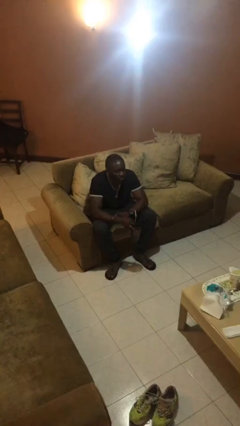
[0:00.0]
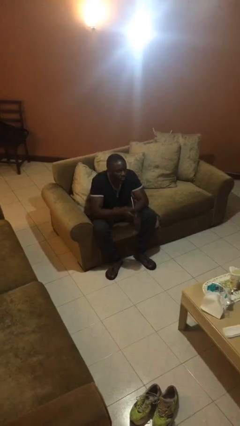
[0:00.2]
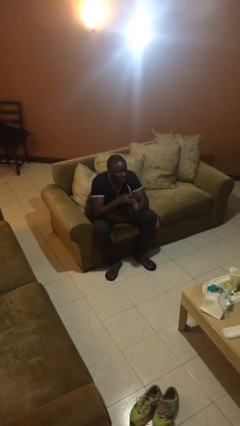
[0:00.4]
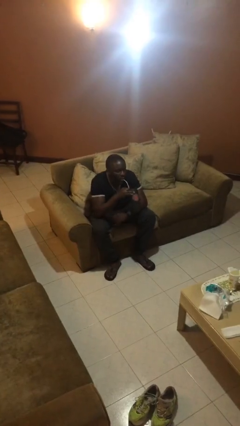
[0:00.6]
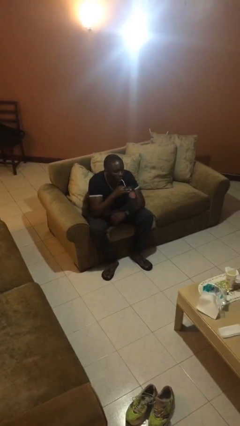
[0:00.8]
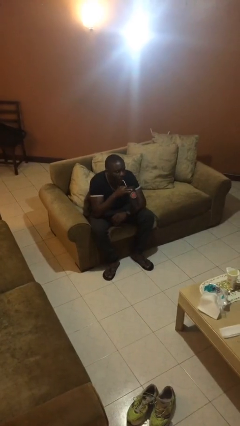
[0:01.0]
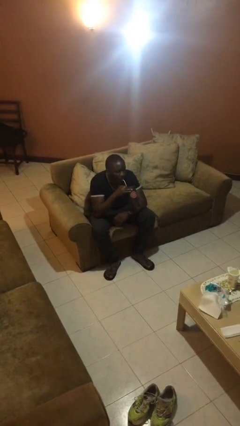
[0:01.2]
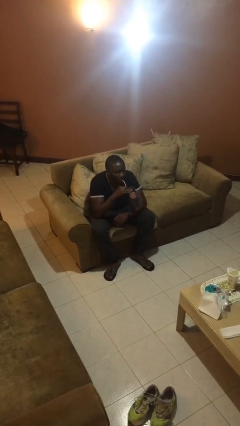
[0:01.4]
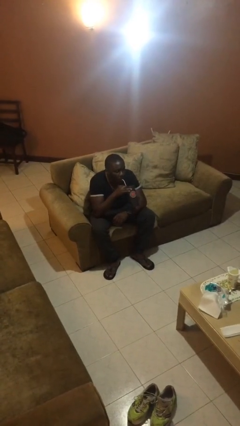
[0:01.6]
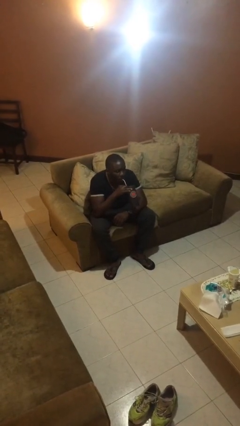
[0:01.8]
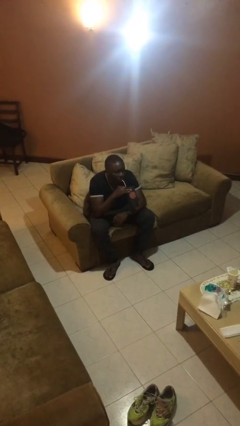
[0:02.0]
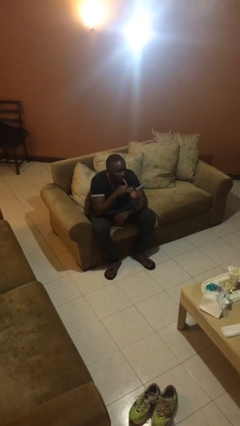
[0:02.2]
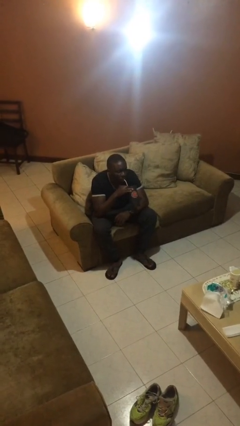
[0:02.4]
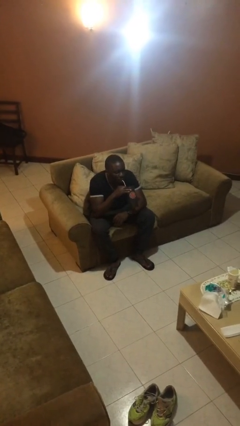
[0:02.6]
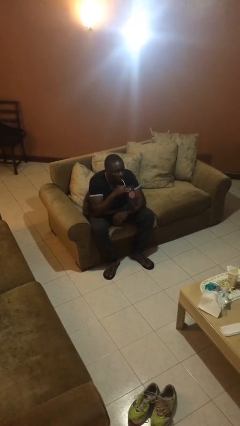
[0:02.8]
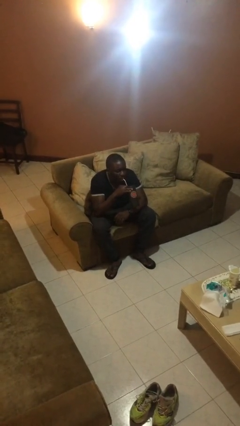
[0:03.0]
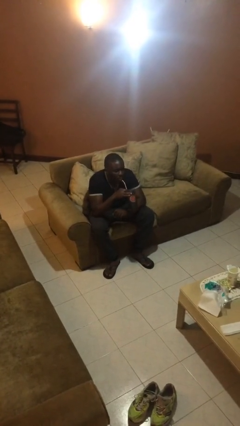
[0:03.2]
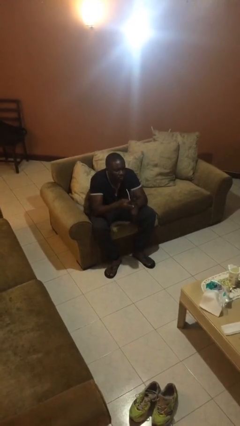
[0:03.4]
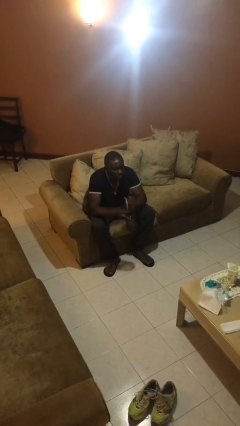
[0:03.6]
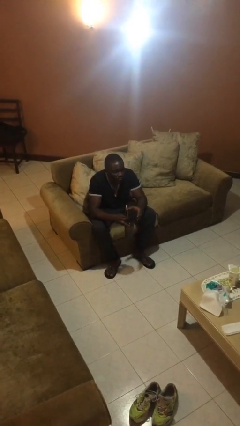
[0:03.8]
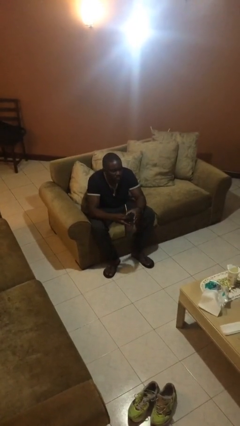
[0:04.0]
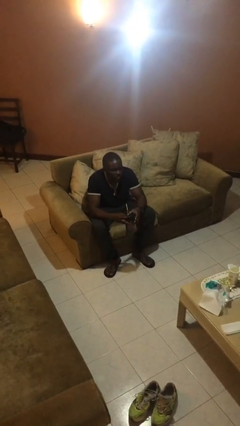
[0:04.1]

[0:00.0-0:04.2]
person drinks from straw

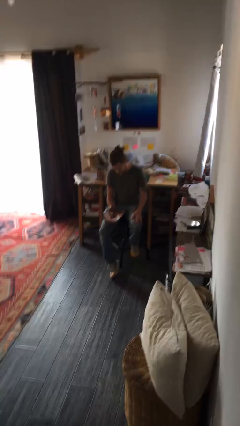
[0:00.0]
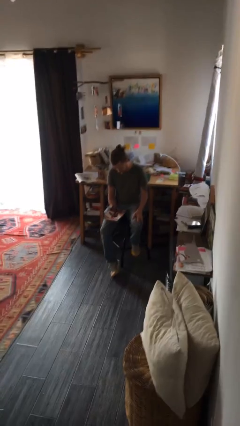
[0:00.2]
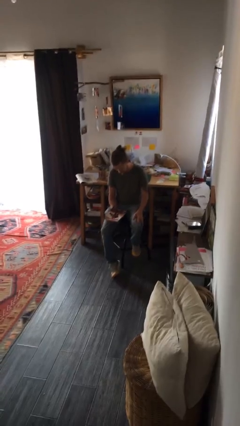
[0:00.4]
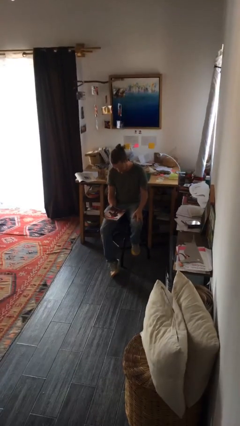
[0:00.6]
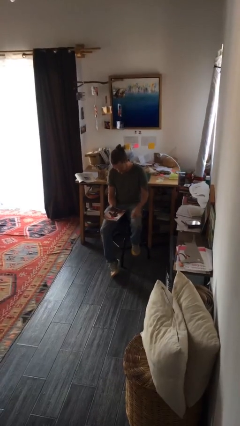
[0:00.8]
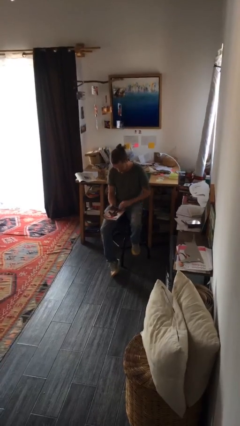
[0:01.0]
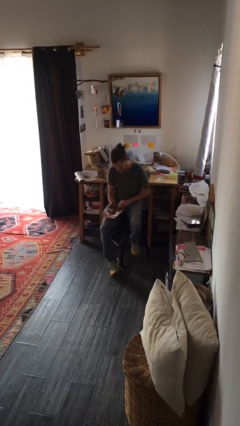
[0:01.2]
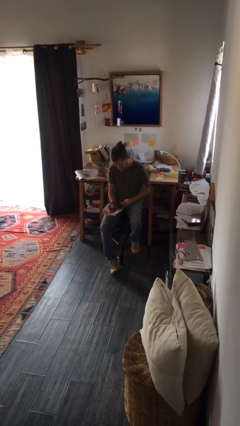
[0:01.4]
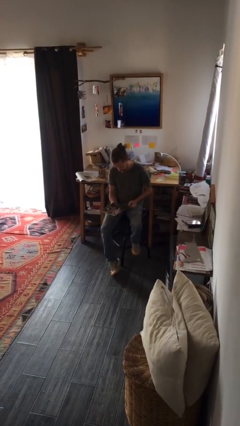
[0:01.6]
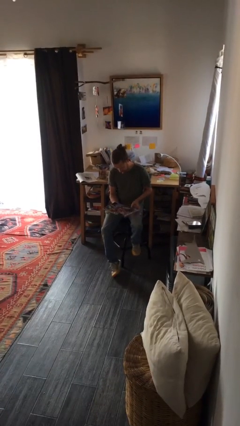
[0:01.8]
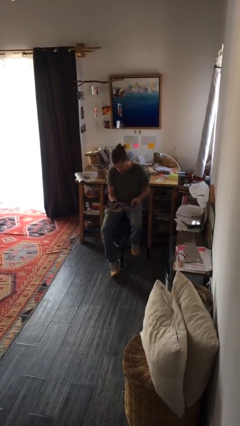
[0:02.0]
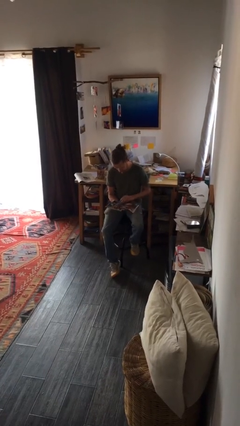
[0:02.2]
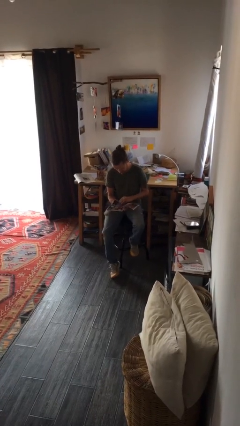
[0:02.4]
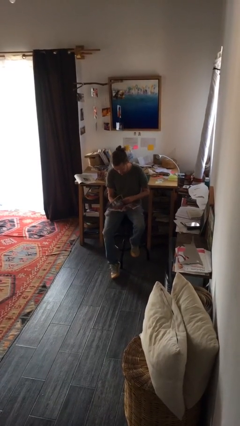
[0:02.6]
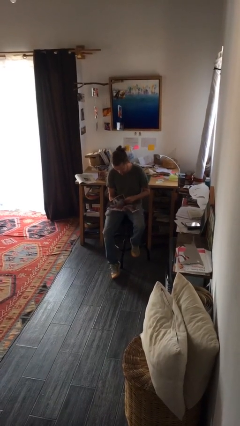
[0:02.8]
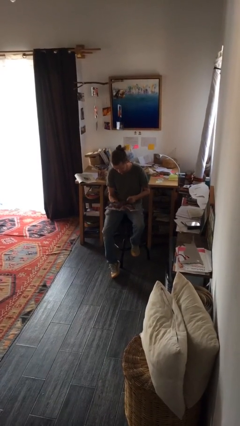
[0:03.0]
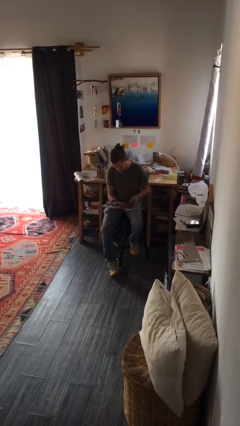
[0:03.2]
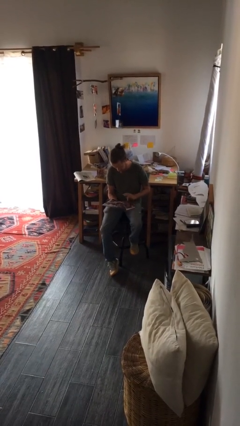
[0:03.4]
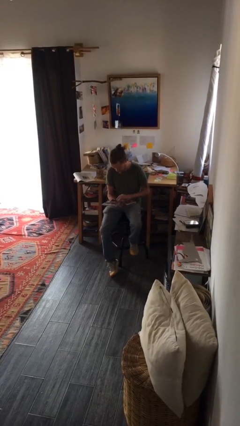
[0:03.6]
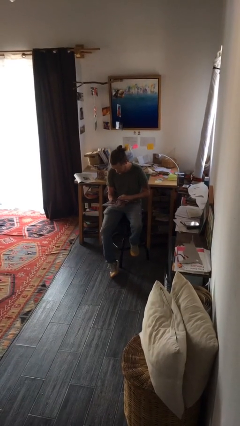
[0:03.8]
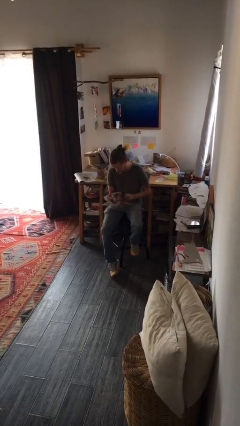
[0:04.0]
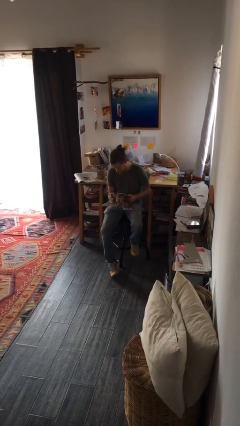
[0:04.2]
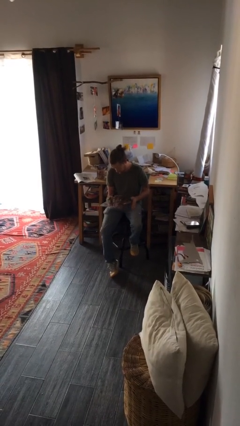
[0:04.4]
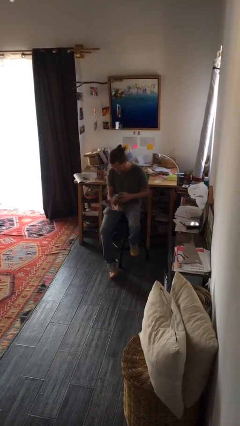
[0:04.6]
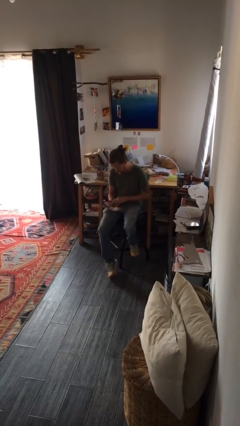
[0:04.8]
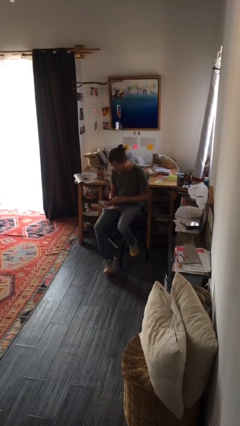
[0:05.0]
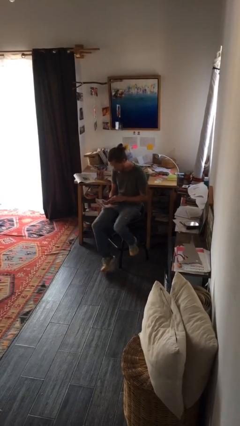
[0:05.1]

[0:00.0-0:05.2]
person reads magazine

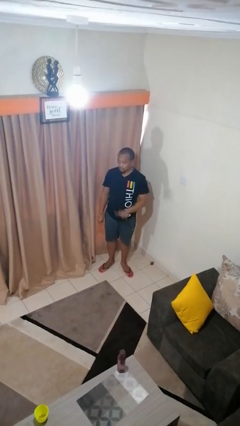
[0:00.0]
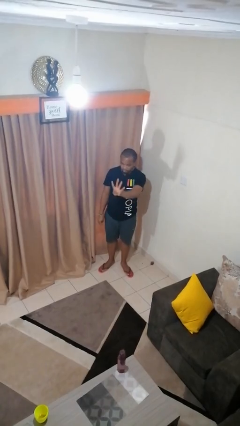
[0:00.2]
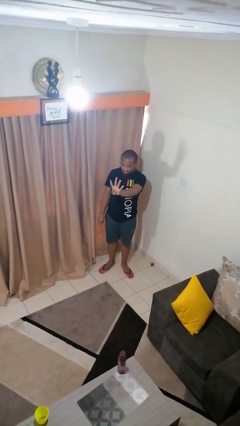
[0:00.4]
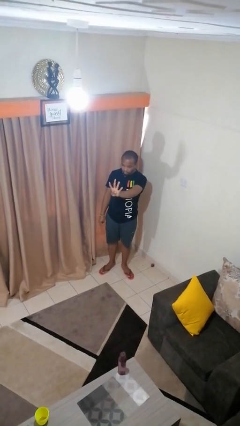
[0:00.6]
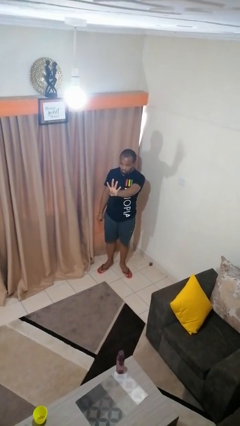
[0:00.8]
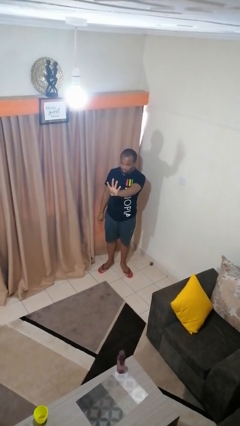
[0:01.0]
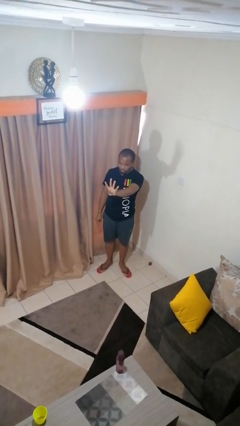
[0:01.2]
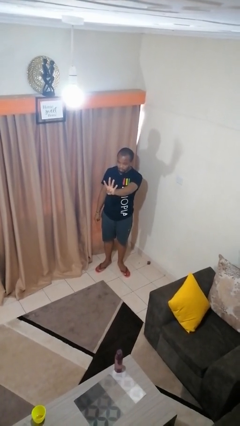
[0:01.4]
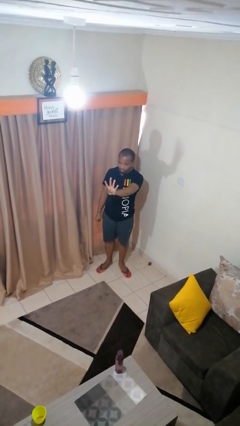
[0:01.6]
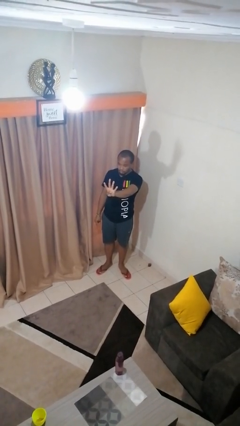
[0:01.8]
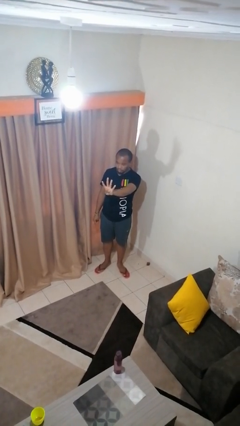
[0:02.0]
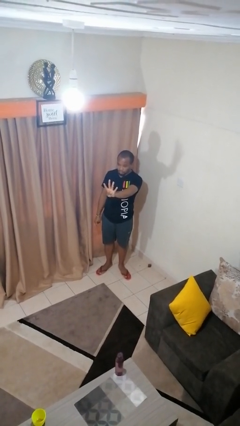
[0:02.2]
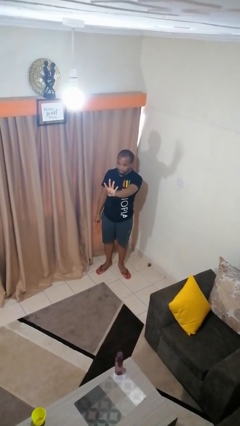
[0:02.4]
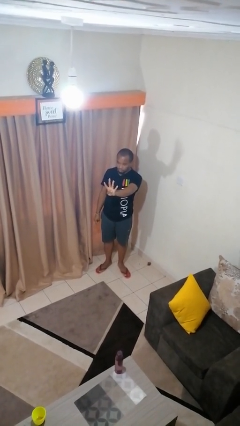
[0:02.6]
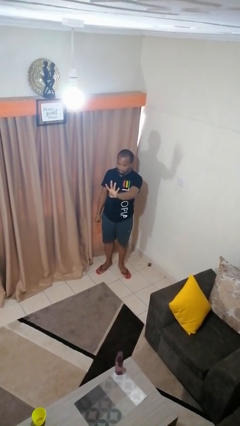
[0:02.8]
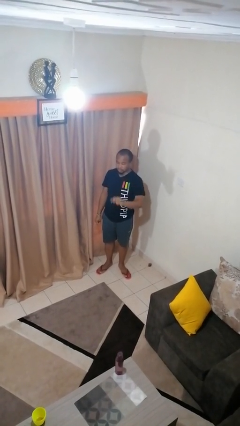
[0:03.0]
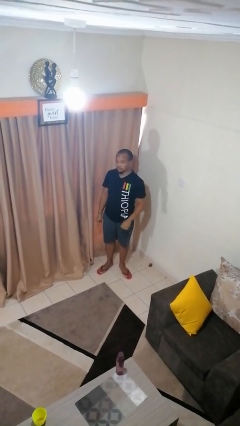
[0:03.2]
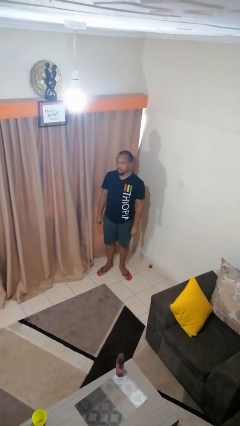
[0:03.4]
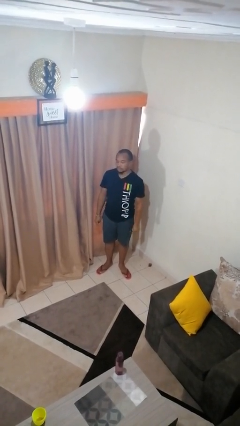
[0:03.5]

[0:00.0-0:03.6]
person gestures number four

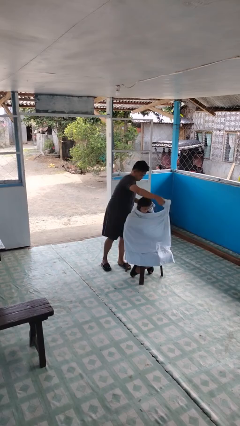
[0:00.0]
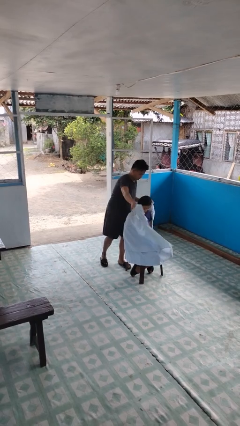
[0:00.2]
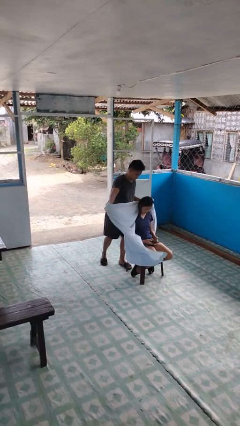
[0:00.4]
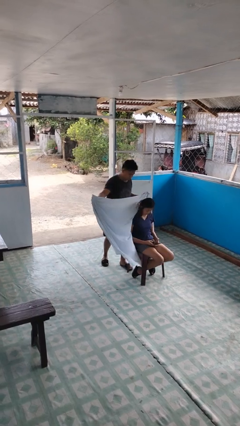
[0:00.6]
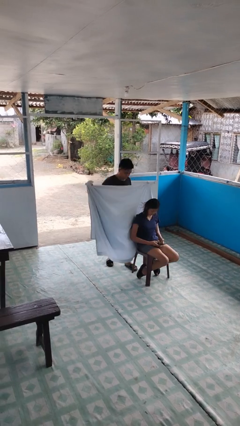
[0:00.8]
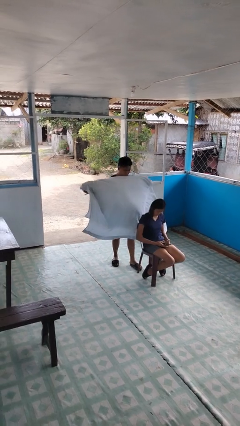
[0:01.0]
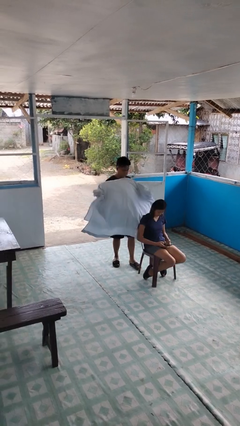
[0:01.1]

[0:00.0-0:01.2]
person uncovers friend with blanket

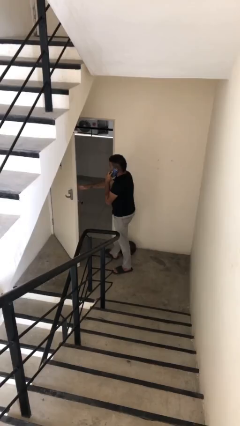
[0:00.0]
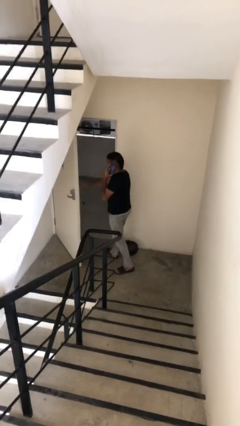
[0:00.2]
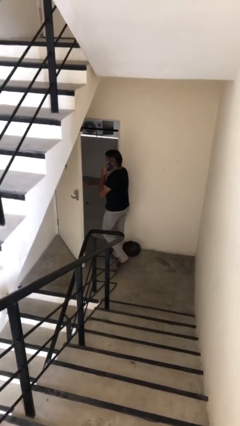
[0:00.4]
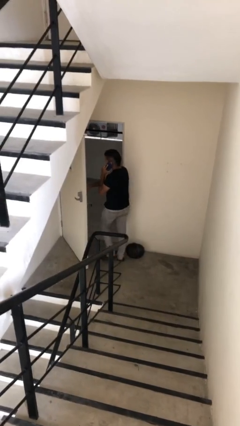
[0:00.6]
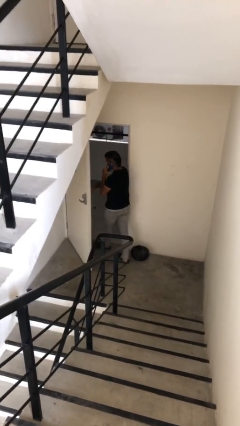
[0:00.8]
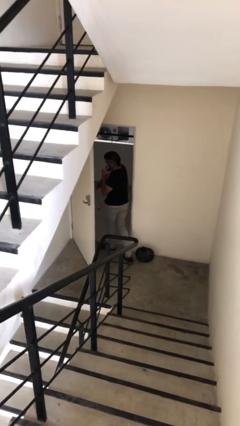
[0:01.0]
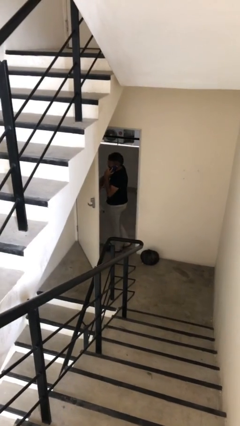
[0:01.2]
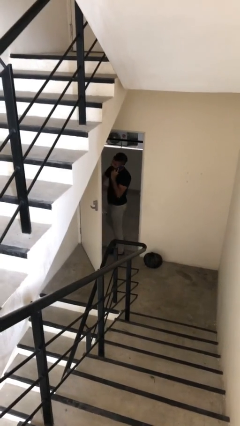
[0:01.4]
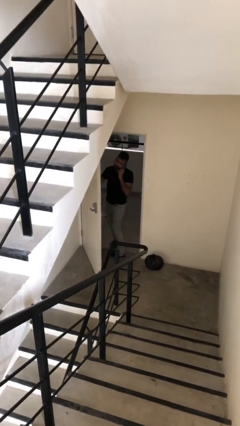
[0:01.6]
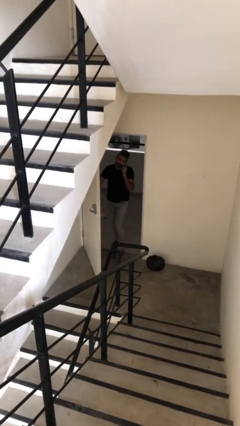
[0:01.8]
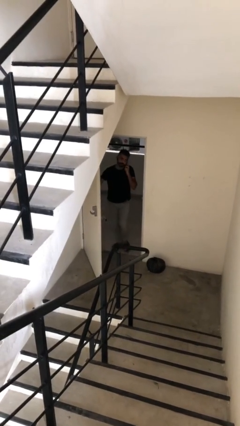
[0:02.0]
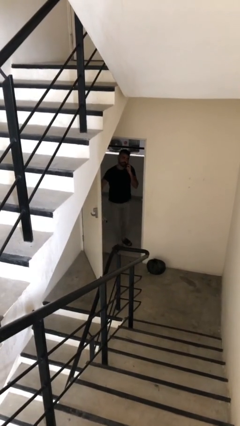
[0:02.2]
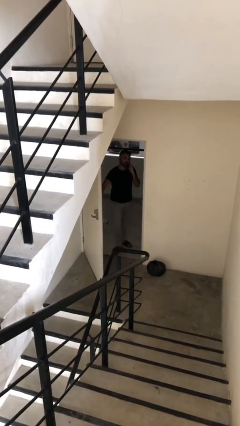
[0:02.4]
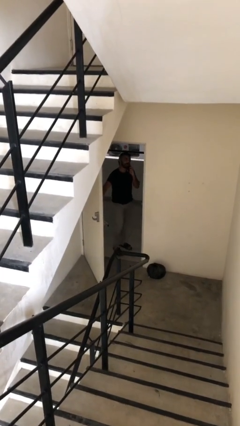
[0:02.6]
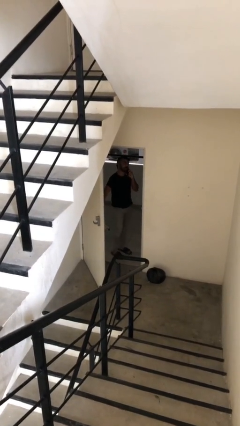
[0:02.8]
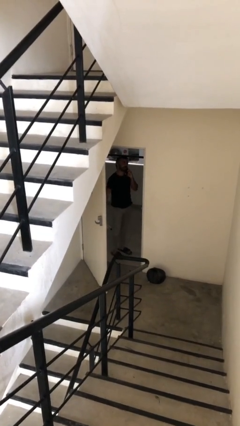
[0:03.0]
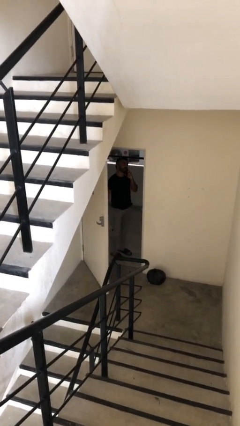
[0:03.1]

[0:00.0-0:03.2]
person exits scene through structure

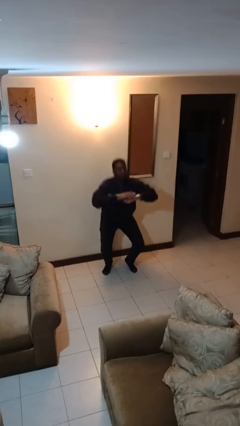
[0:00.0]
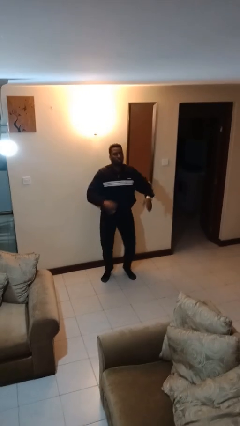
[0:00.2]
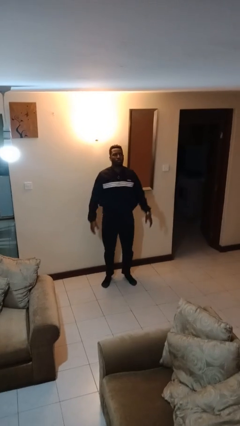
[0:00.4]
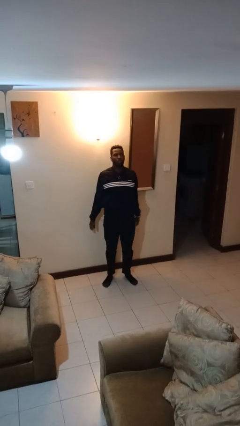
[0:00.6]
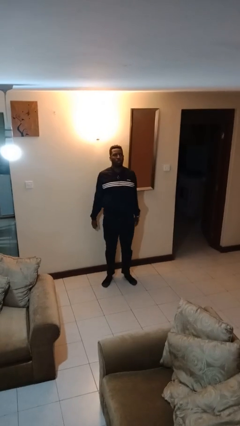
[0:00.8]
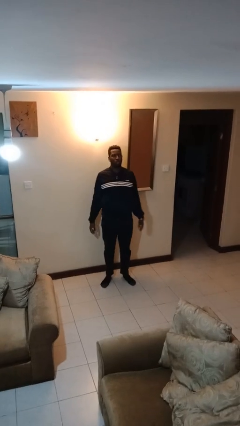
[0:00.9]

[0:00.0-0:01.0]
person stands up
